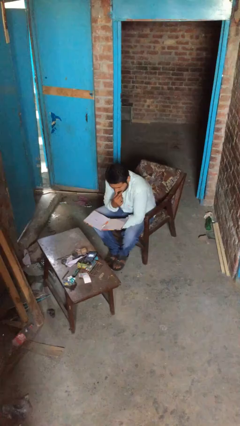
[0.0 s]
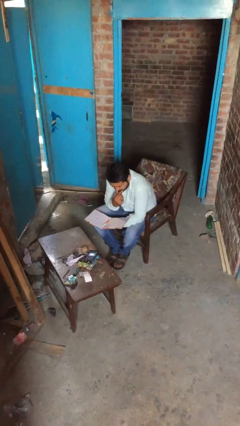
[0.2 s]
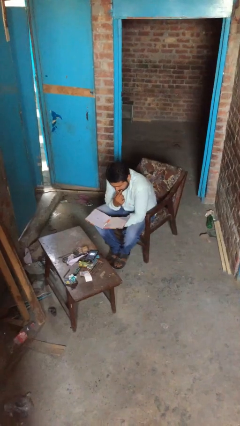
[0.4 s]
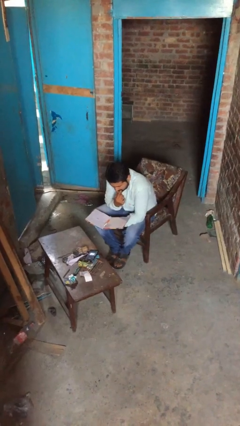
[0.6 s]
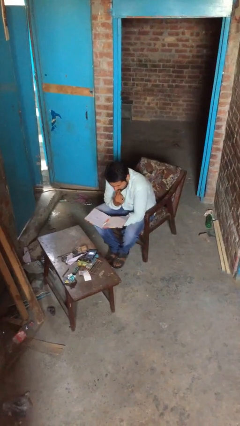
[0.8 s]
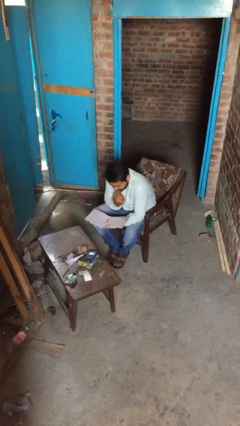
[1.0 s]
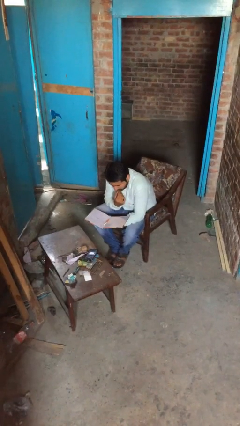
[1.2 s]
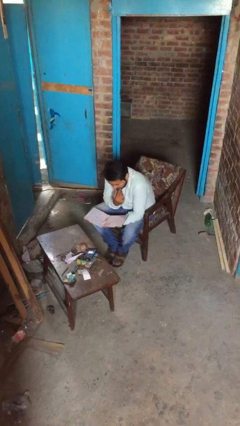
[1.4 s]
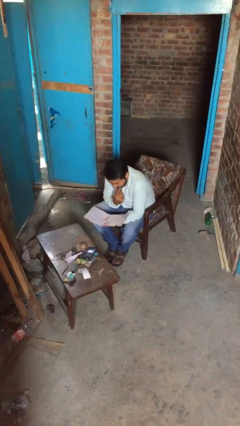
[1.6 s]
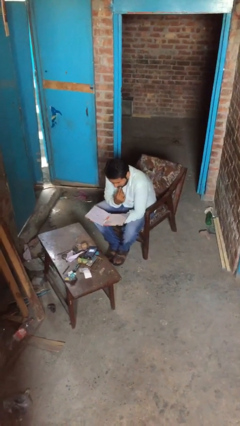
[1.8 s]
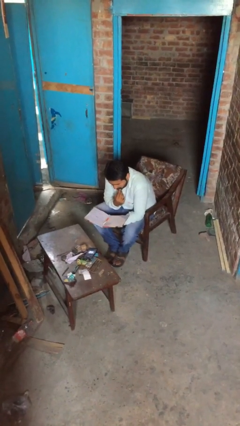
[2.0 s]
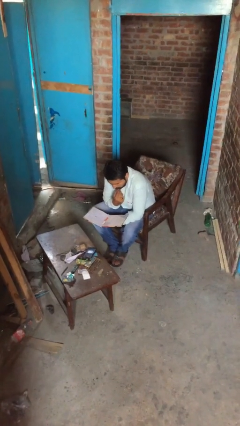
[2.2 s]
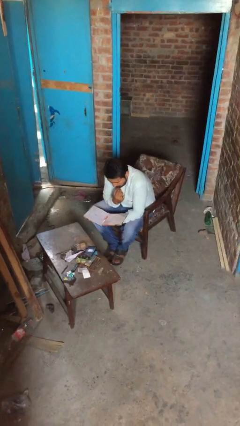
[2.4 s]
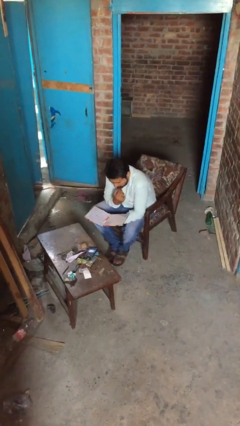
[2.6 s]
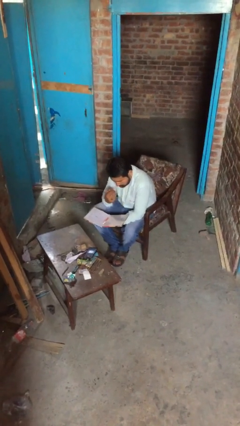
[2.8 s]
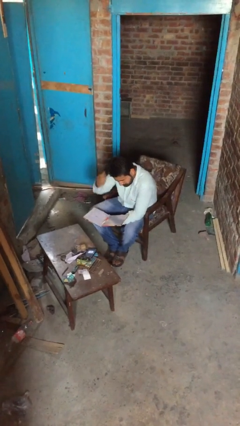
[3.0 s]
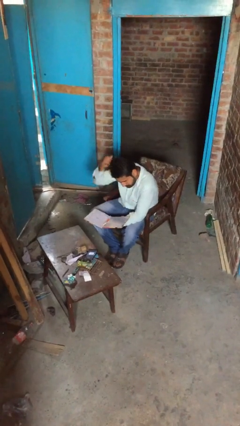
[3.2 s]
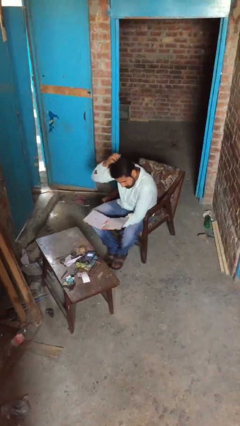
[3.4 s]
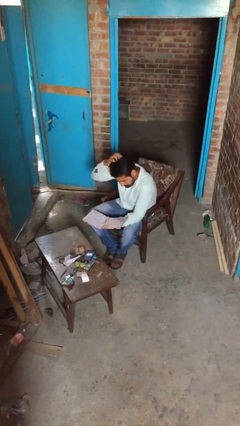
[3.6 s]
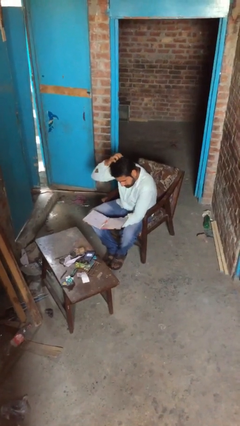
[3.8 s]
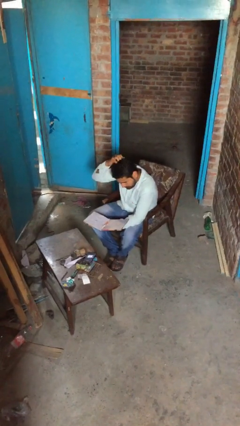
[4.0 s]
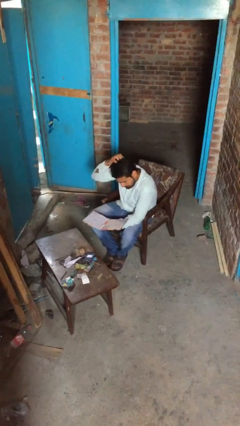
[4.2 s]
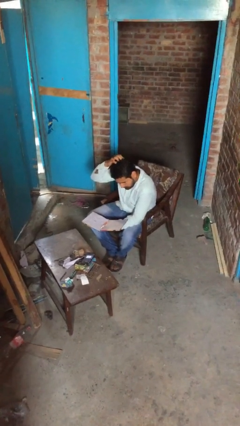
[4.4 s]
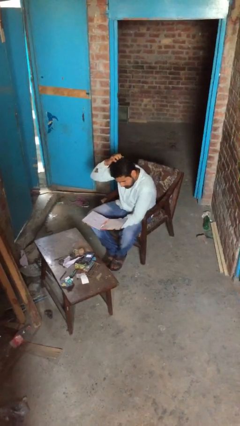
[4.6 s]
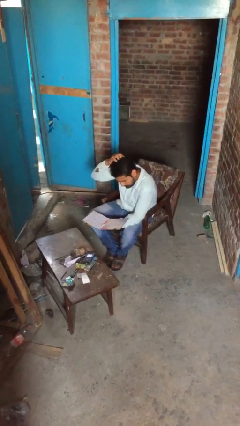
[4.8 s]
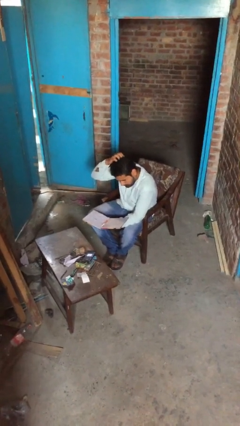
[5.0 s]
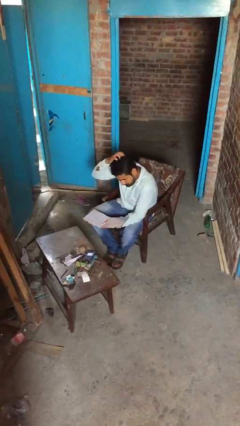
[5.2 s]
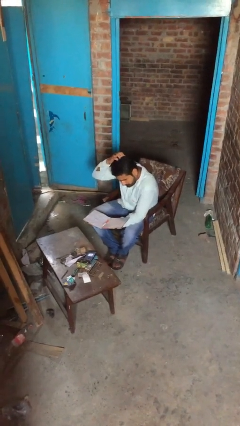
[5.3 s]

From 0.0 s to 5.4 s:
person reads document

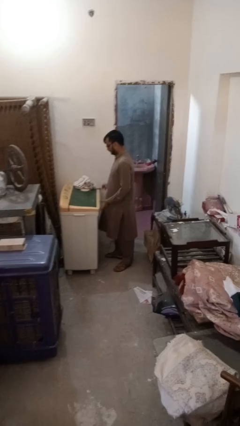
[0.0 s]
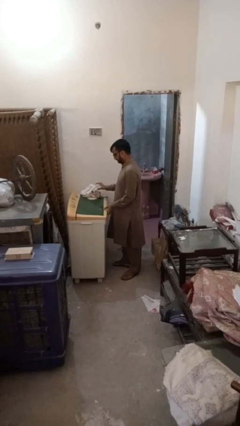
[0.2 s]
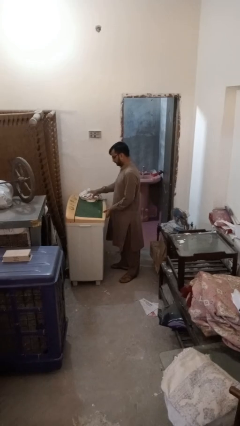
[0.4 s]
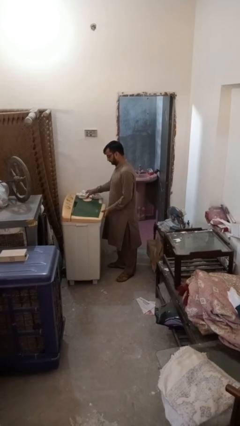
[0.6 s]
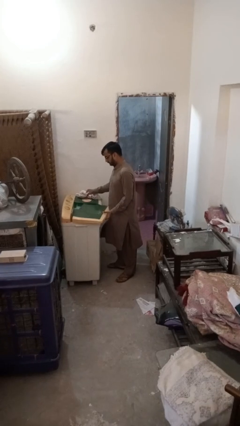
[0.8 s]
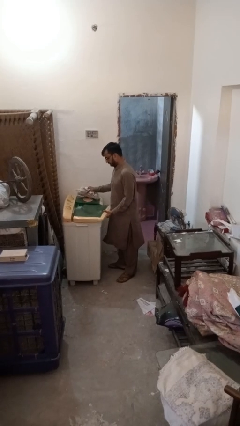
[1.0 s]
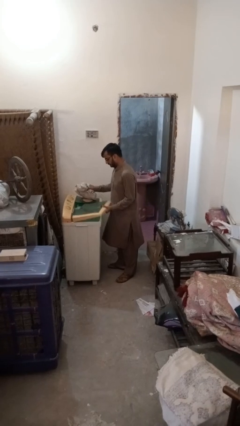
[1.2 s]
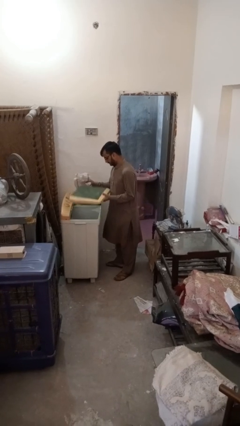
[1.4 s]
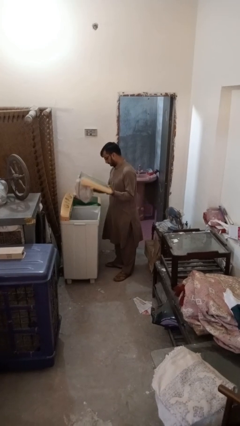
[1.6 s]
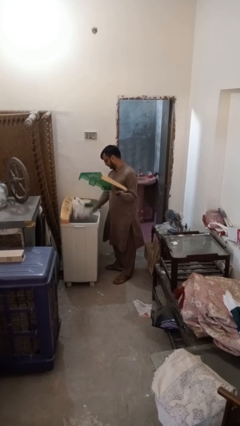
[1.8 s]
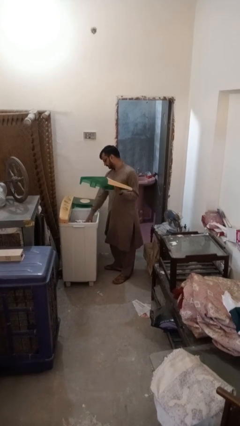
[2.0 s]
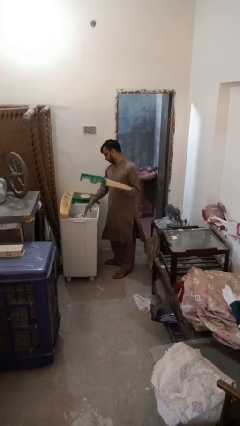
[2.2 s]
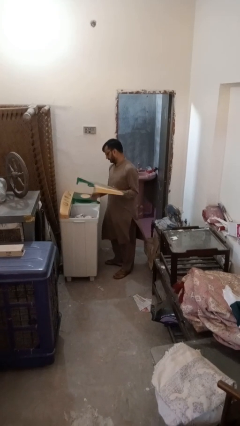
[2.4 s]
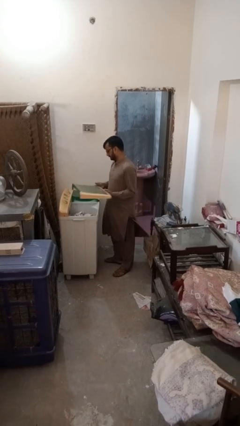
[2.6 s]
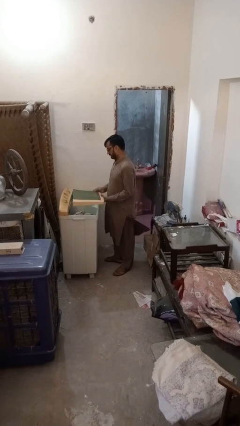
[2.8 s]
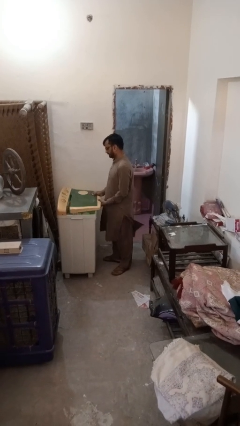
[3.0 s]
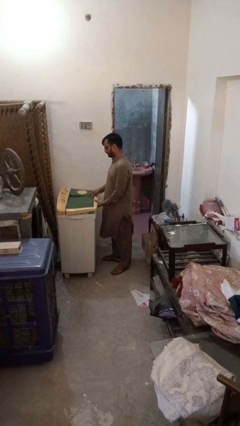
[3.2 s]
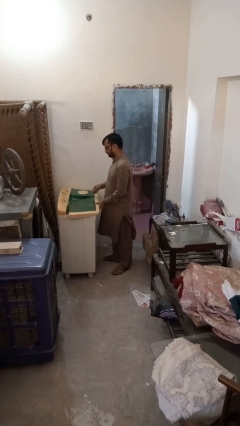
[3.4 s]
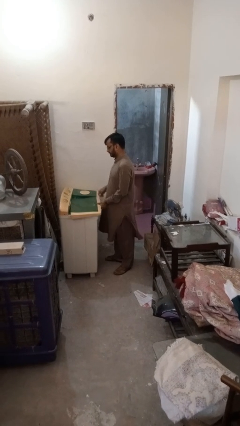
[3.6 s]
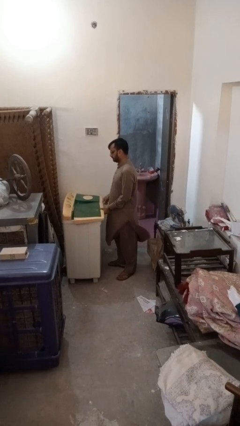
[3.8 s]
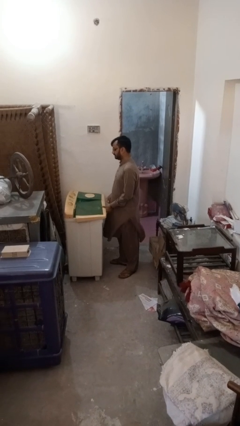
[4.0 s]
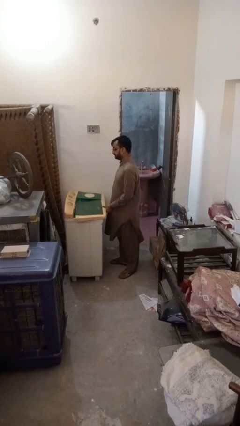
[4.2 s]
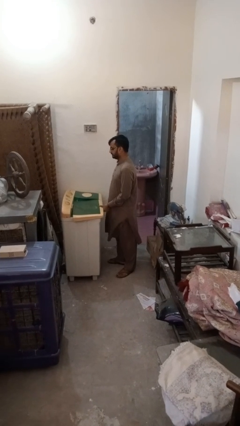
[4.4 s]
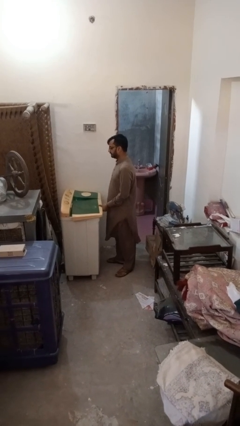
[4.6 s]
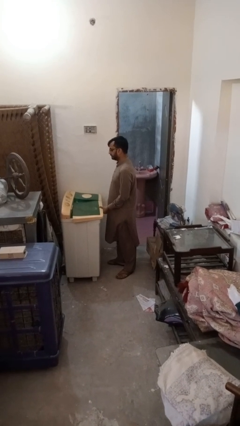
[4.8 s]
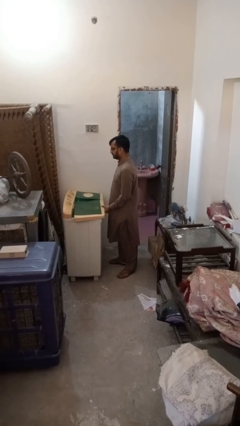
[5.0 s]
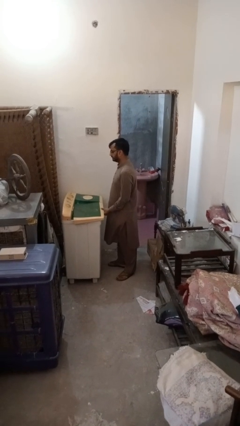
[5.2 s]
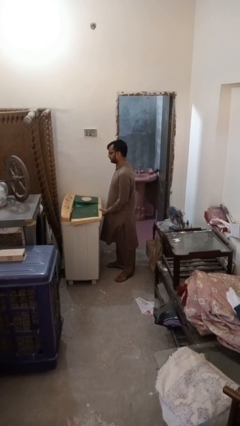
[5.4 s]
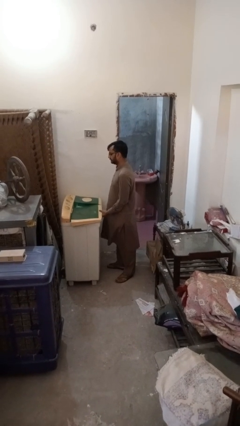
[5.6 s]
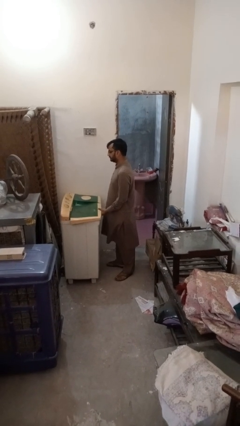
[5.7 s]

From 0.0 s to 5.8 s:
person loads clotheswasher

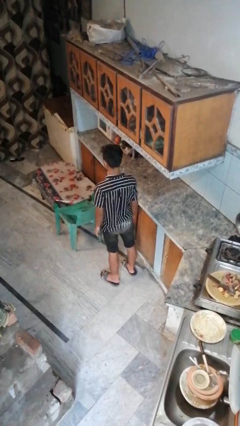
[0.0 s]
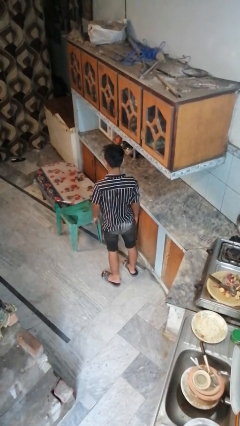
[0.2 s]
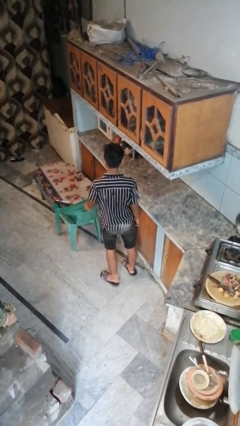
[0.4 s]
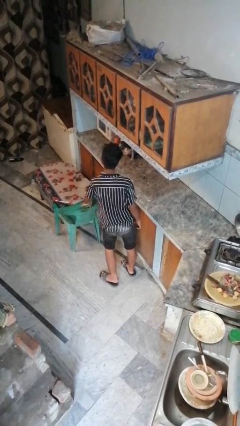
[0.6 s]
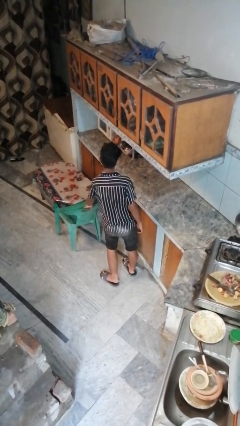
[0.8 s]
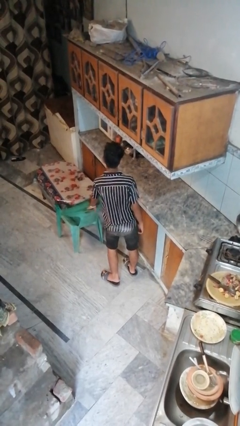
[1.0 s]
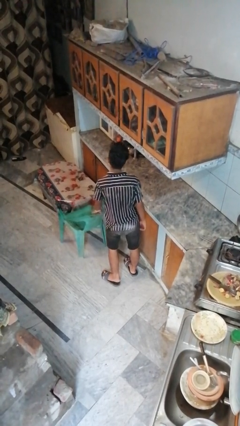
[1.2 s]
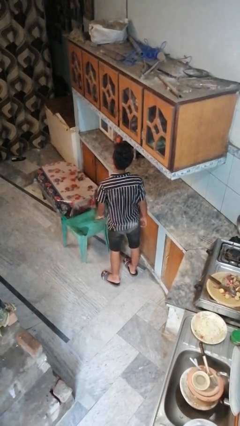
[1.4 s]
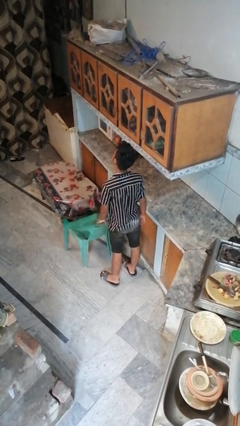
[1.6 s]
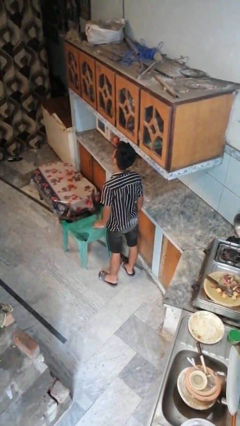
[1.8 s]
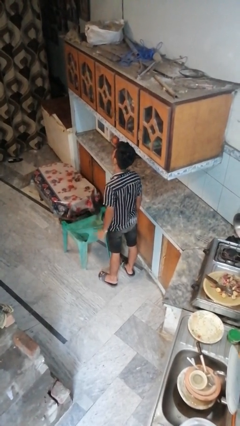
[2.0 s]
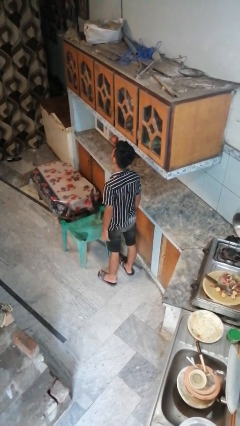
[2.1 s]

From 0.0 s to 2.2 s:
person pulls out chair

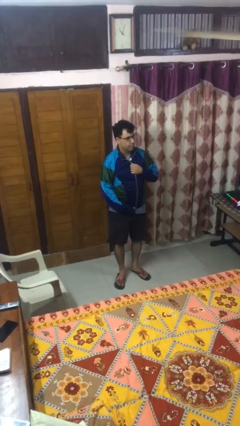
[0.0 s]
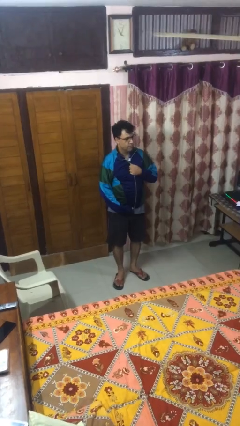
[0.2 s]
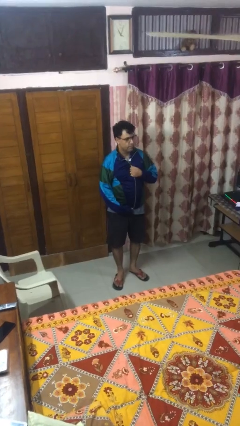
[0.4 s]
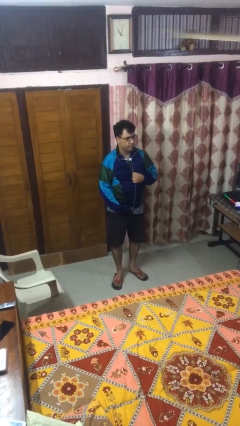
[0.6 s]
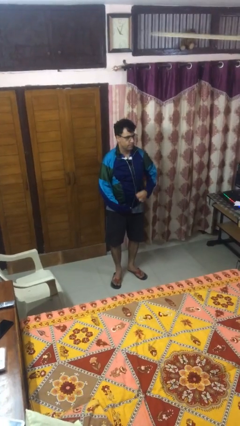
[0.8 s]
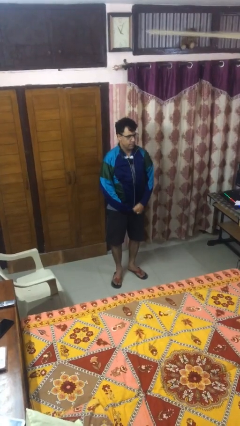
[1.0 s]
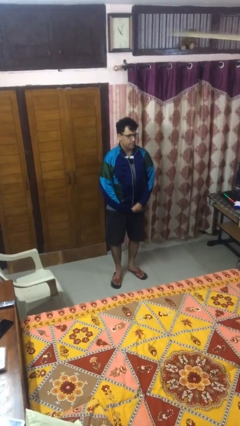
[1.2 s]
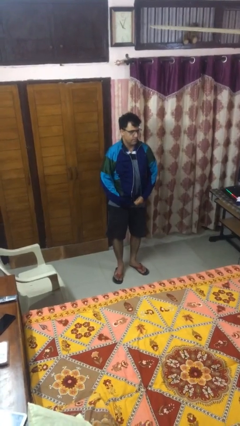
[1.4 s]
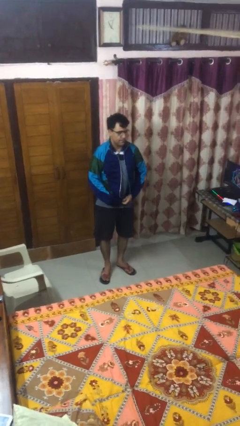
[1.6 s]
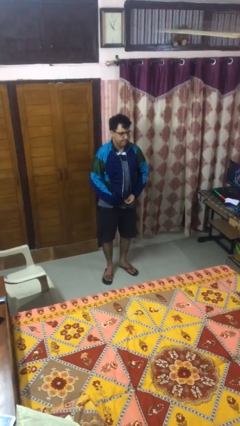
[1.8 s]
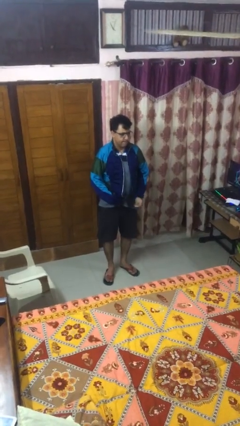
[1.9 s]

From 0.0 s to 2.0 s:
person unzips jacket

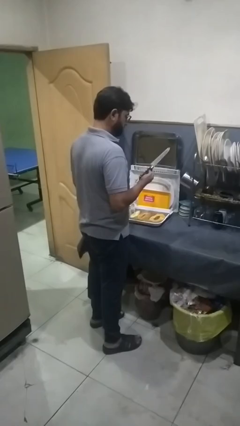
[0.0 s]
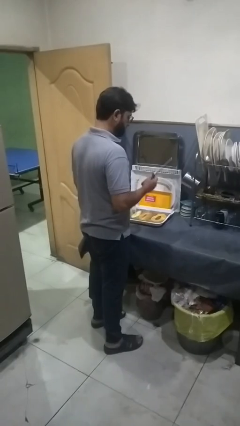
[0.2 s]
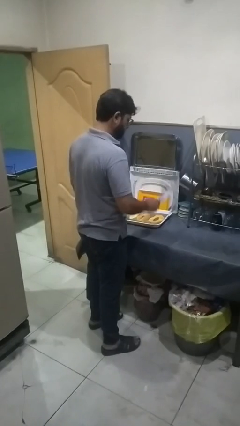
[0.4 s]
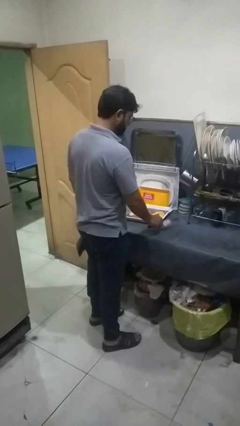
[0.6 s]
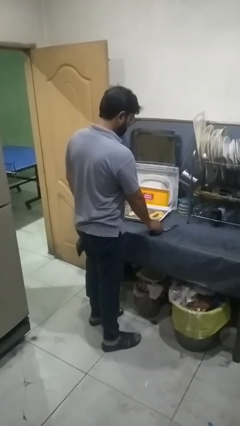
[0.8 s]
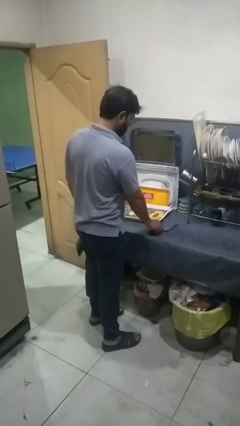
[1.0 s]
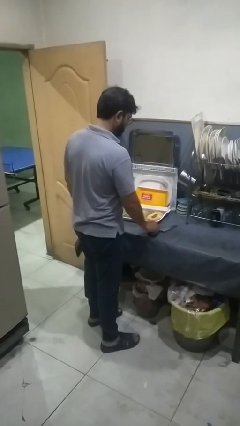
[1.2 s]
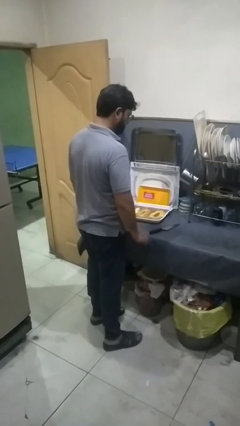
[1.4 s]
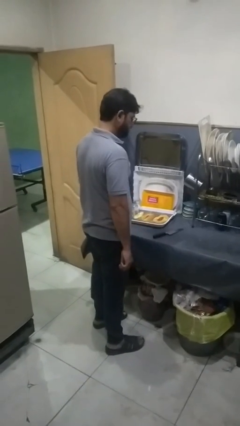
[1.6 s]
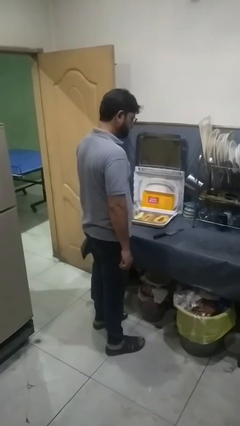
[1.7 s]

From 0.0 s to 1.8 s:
person puts down object on countertop

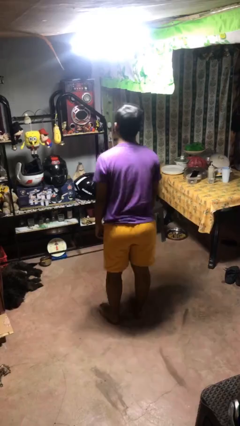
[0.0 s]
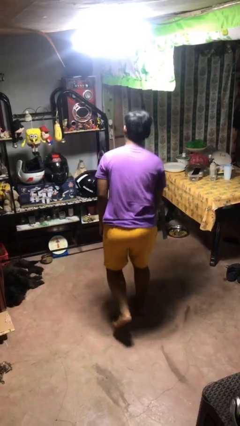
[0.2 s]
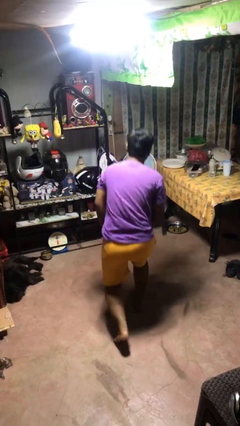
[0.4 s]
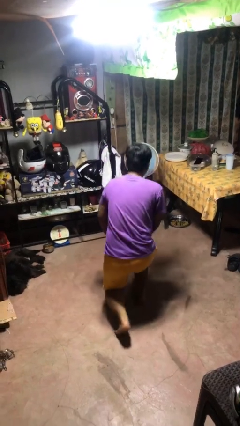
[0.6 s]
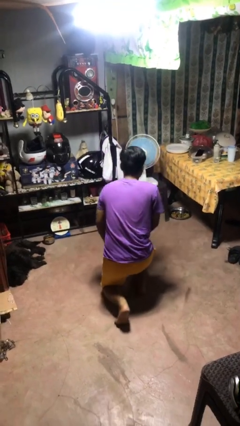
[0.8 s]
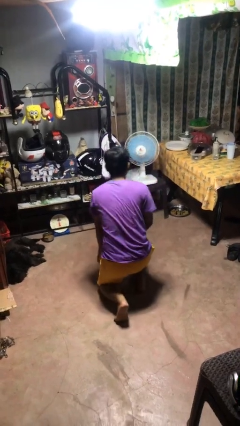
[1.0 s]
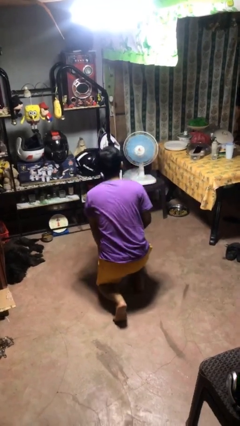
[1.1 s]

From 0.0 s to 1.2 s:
person kneels
